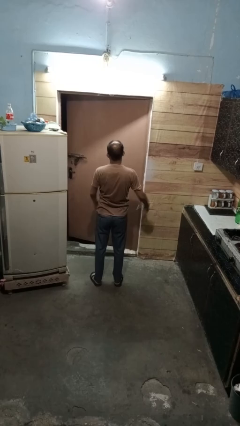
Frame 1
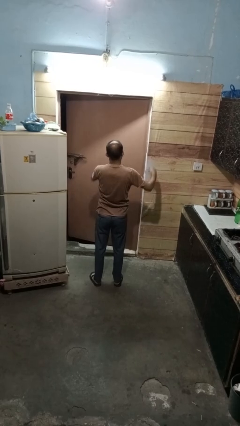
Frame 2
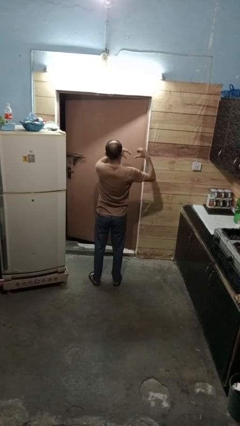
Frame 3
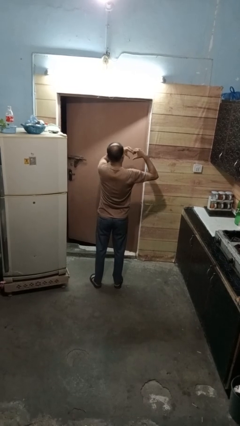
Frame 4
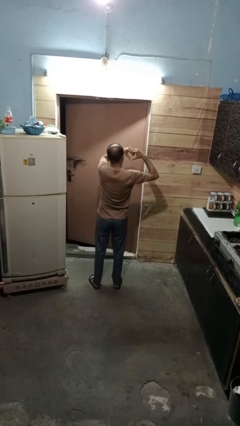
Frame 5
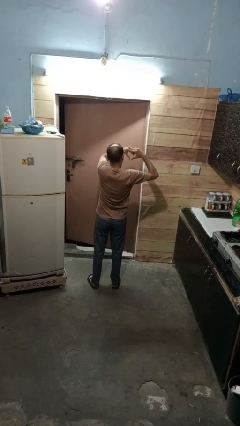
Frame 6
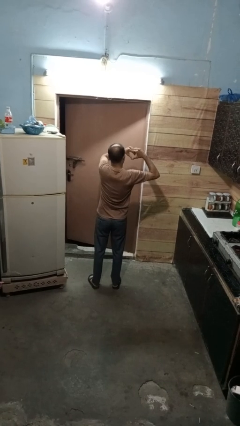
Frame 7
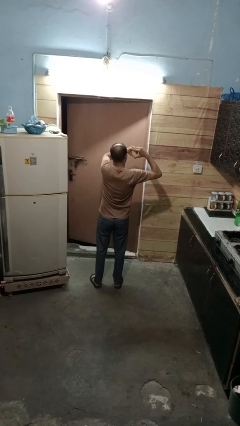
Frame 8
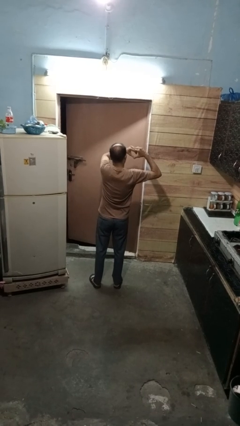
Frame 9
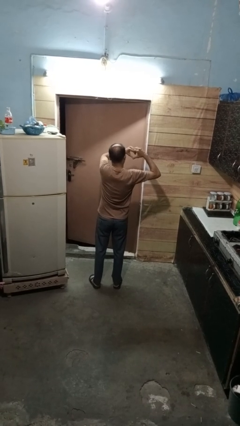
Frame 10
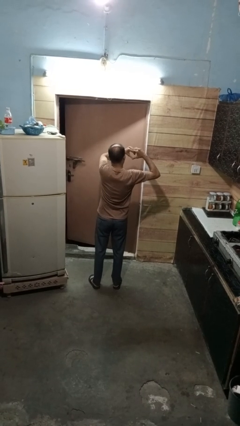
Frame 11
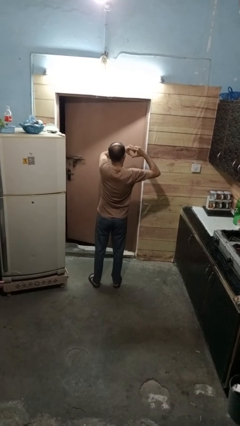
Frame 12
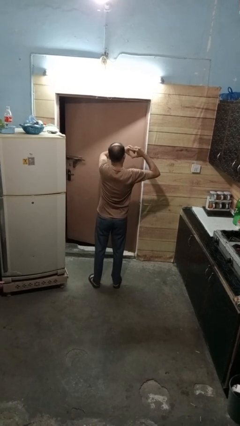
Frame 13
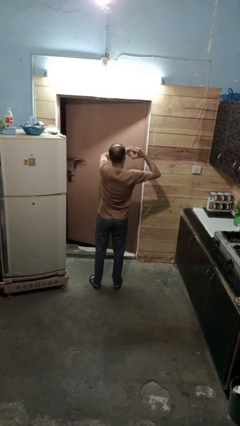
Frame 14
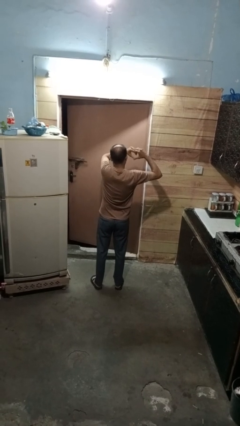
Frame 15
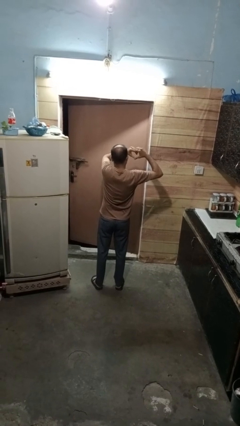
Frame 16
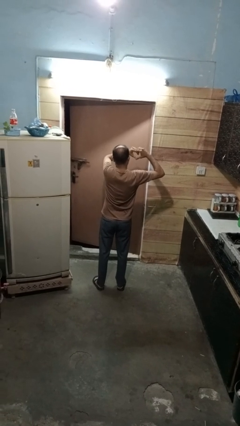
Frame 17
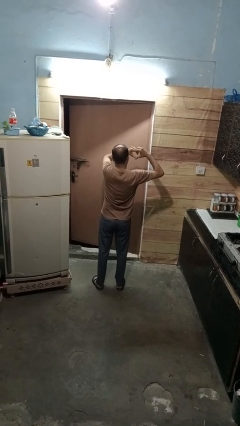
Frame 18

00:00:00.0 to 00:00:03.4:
person gestures heart

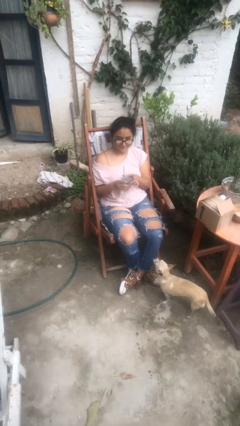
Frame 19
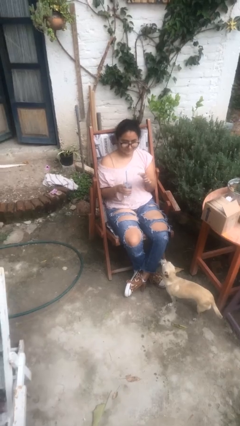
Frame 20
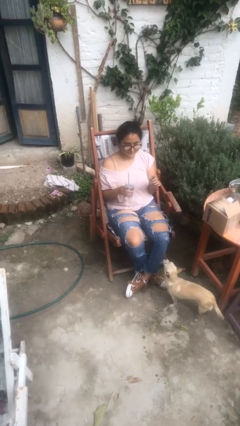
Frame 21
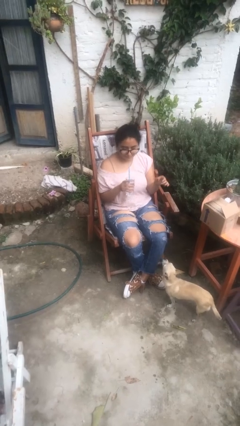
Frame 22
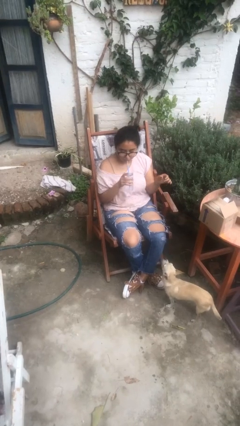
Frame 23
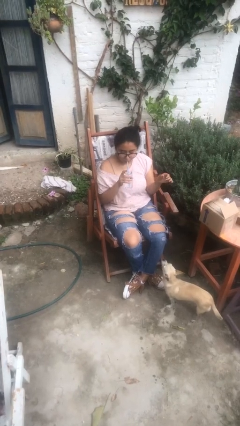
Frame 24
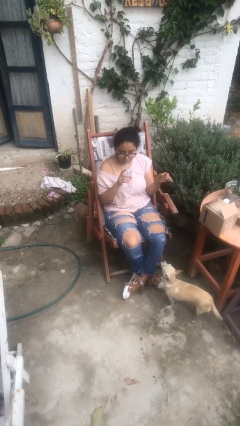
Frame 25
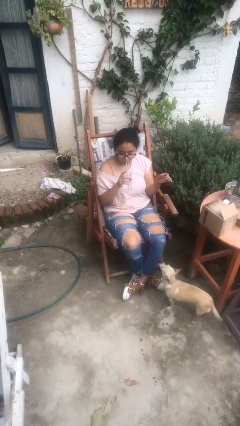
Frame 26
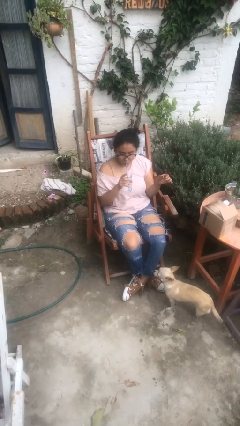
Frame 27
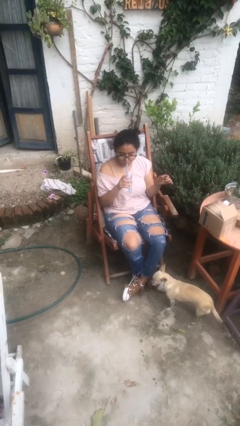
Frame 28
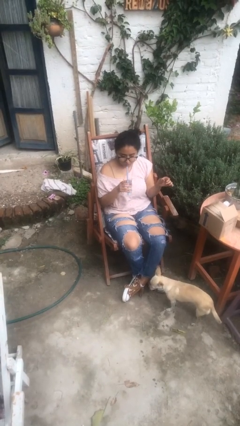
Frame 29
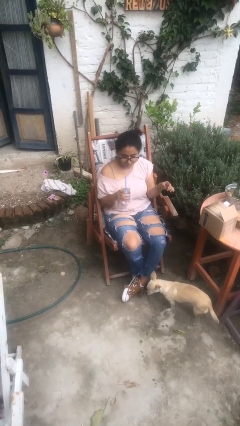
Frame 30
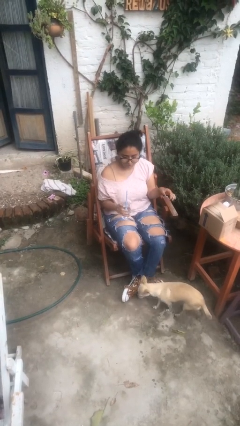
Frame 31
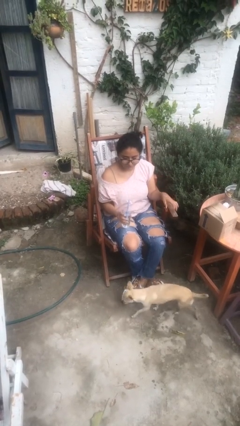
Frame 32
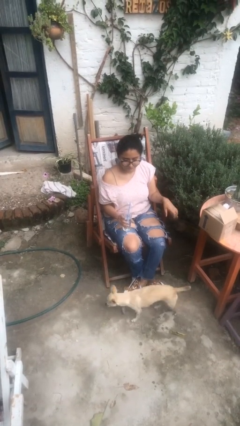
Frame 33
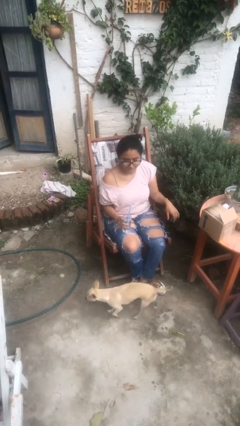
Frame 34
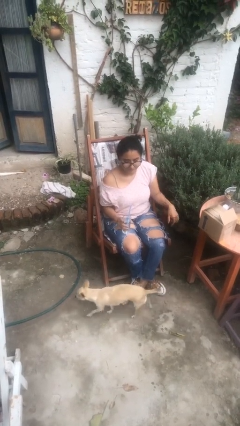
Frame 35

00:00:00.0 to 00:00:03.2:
person drinks from straw

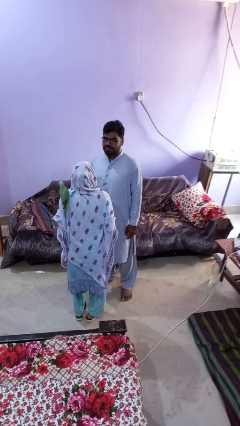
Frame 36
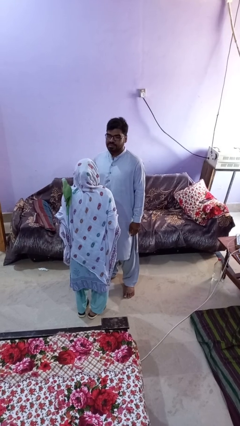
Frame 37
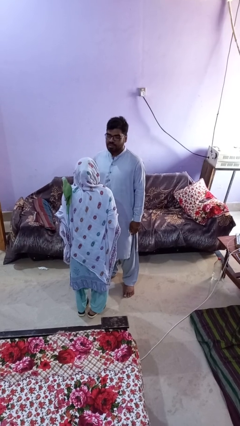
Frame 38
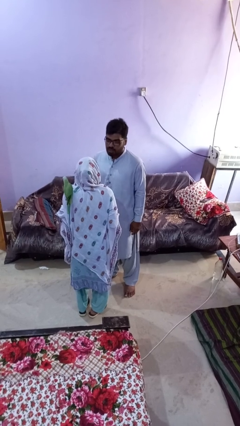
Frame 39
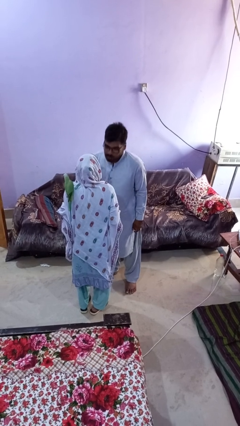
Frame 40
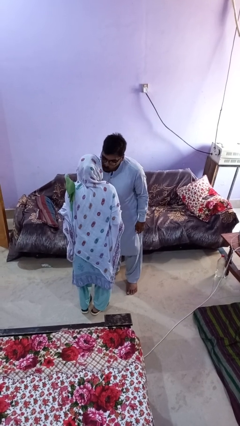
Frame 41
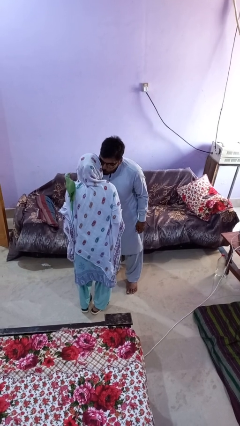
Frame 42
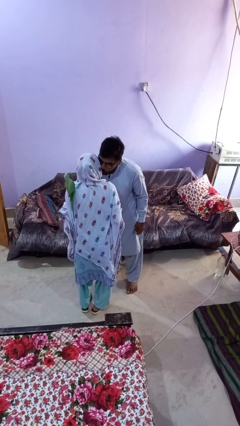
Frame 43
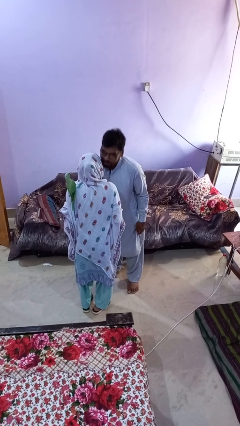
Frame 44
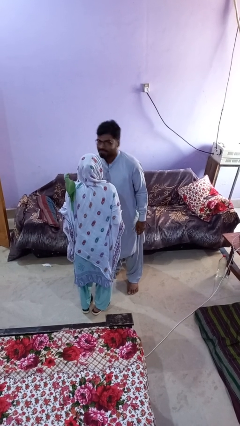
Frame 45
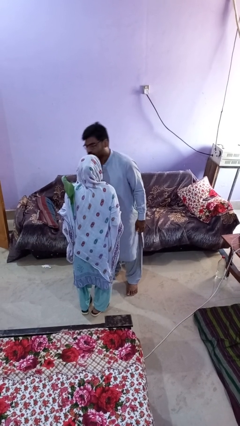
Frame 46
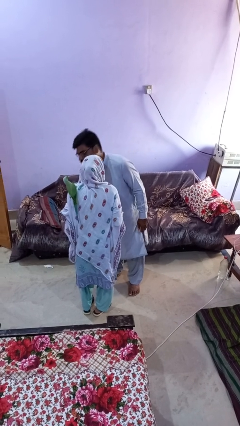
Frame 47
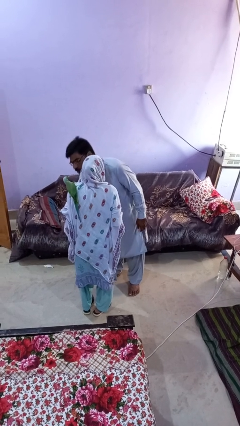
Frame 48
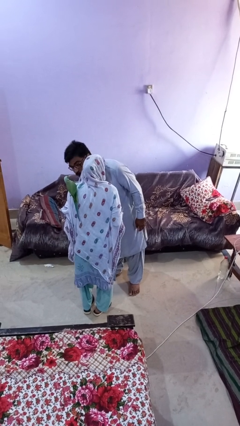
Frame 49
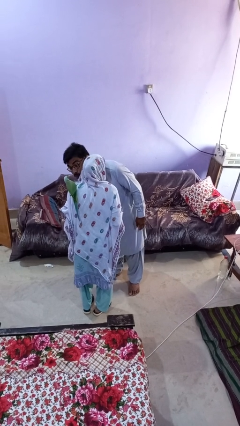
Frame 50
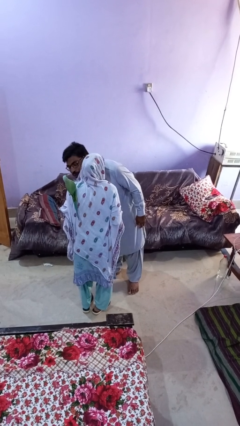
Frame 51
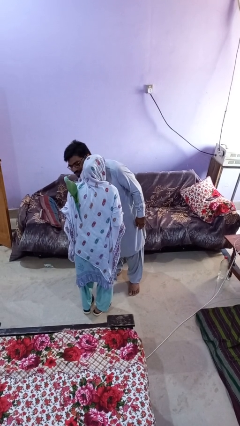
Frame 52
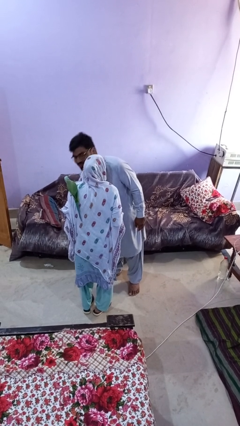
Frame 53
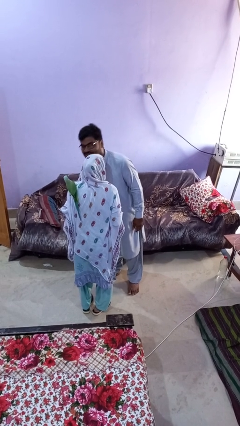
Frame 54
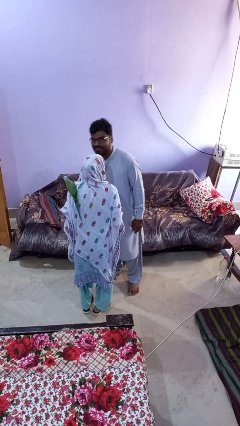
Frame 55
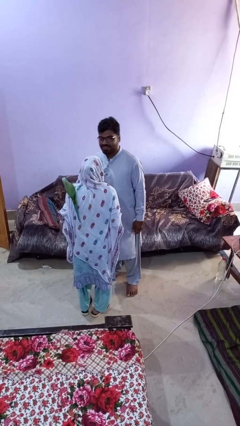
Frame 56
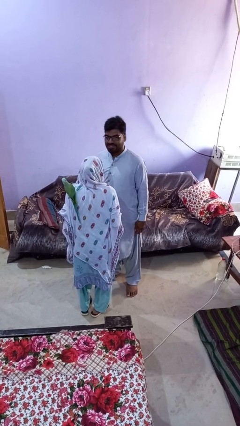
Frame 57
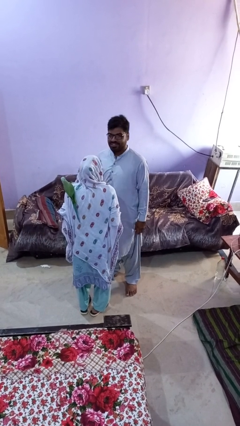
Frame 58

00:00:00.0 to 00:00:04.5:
person kisses cheek of person

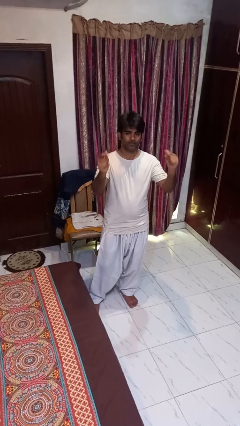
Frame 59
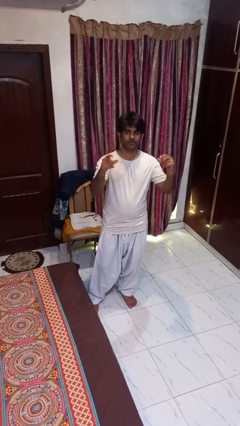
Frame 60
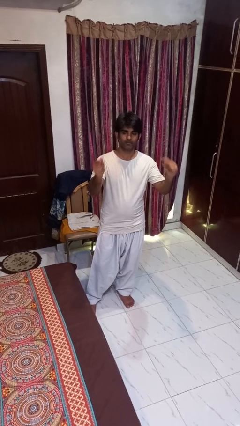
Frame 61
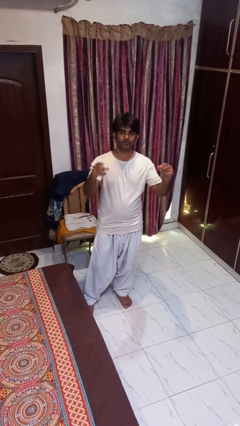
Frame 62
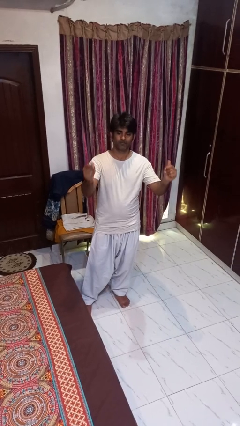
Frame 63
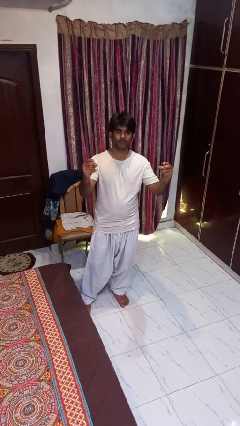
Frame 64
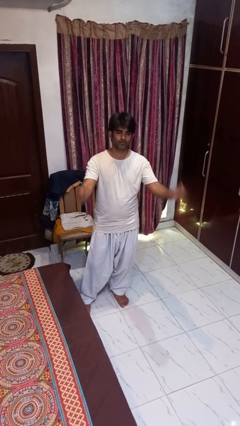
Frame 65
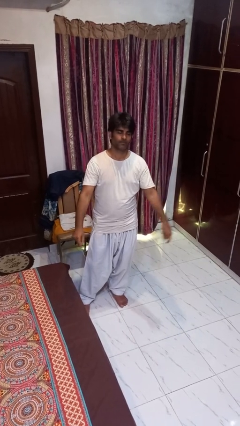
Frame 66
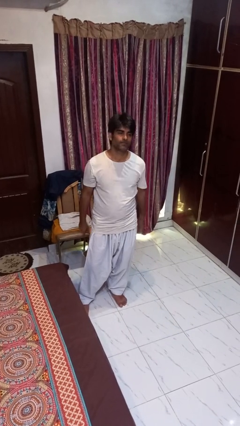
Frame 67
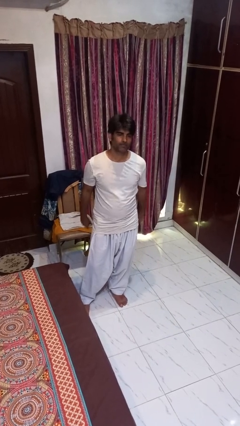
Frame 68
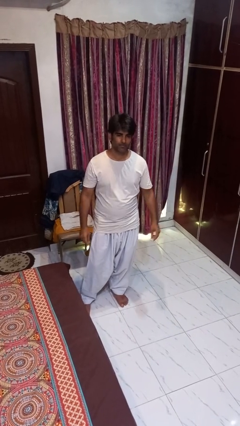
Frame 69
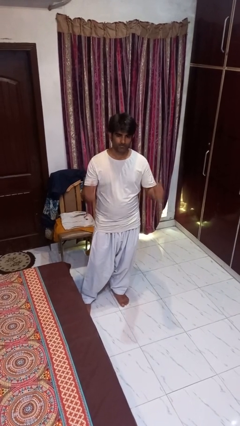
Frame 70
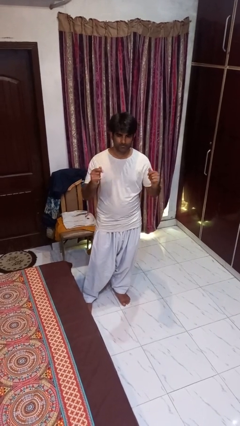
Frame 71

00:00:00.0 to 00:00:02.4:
person snaps fingers

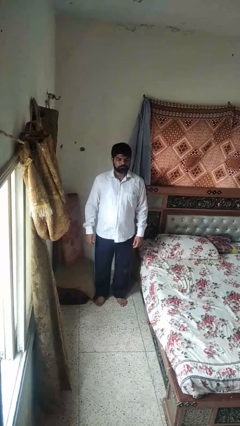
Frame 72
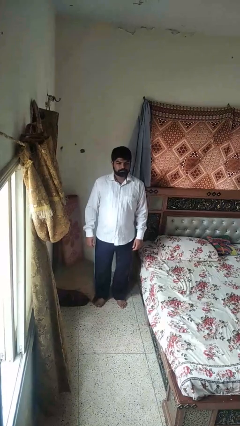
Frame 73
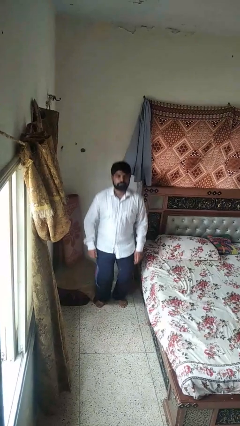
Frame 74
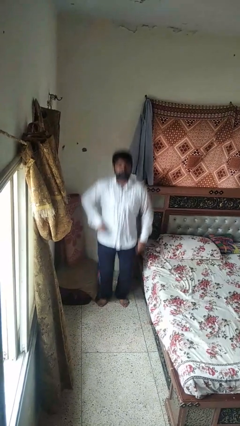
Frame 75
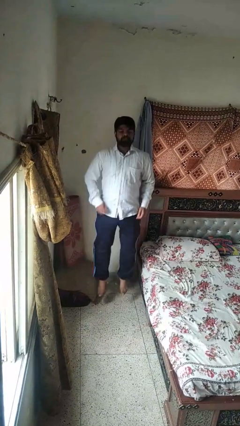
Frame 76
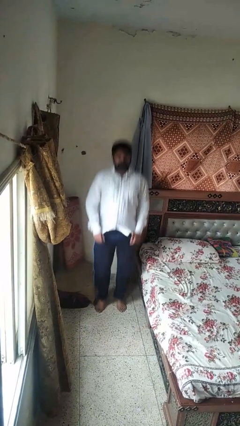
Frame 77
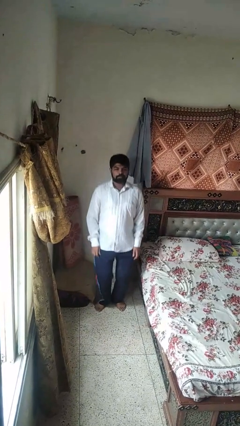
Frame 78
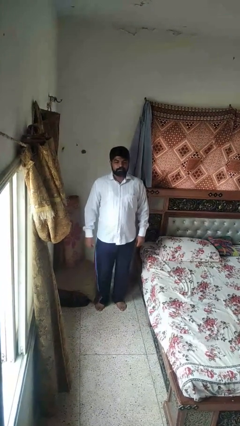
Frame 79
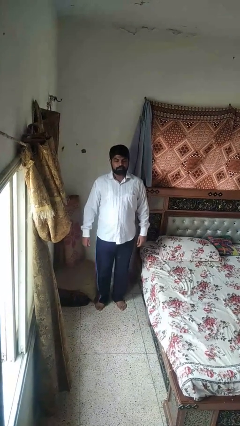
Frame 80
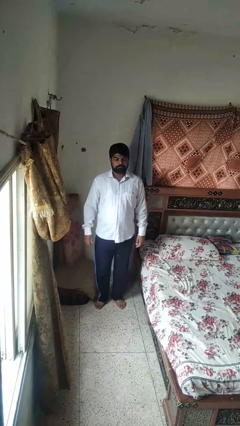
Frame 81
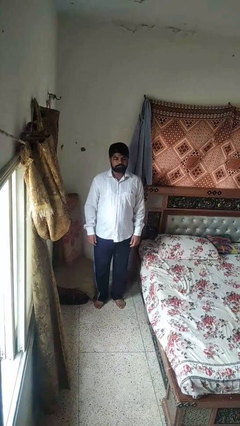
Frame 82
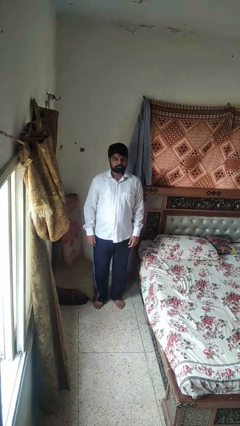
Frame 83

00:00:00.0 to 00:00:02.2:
person jumps

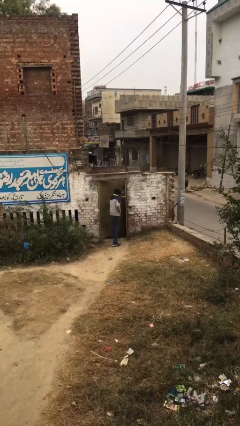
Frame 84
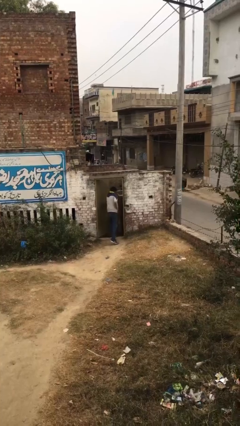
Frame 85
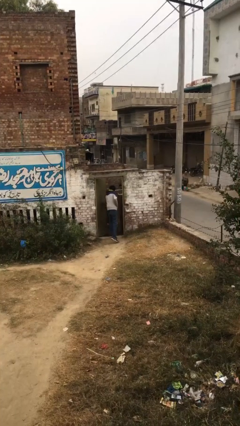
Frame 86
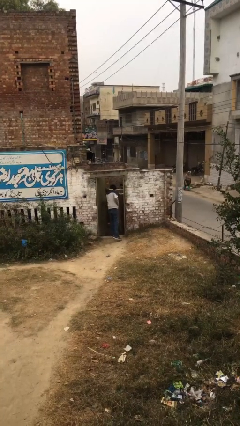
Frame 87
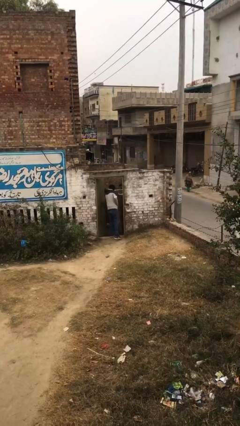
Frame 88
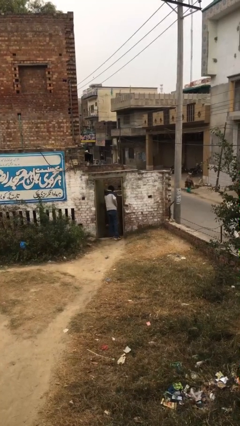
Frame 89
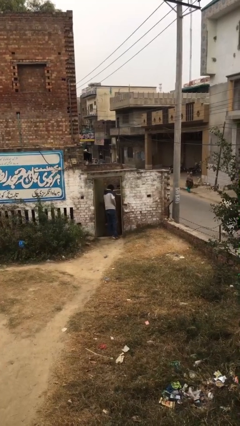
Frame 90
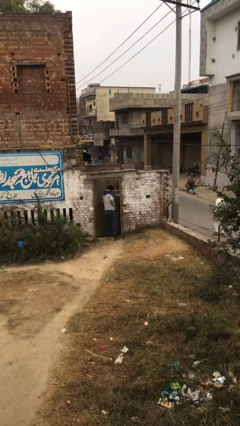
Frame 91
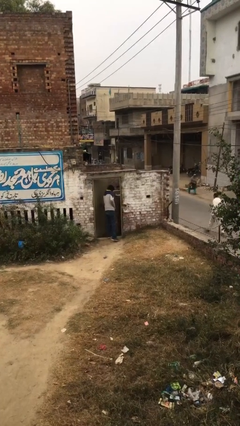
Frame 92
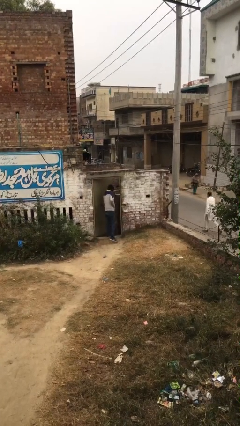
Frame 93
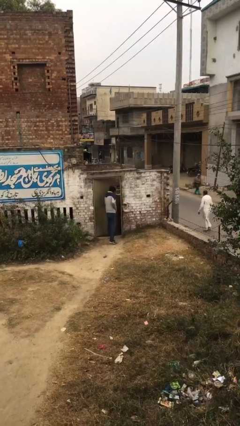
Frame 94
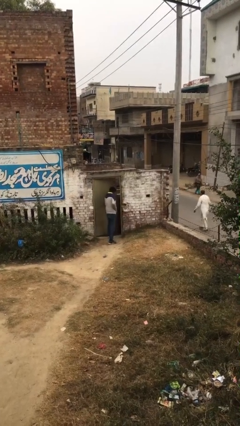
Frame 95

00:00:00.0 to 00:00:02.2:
person opens facility door
